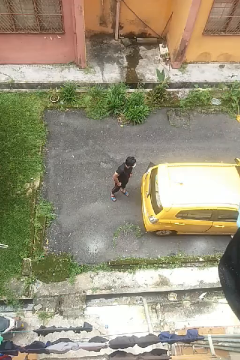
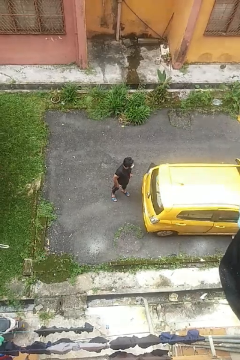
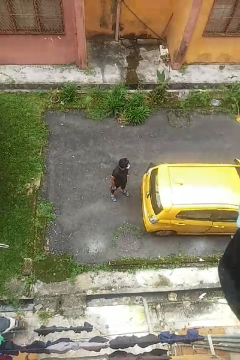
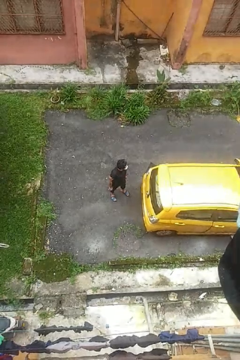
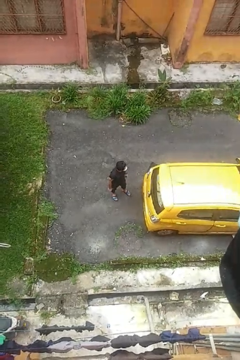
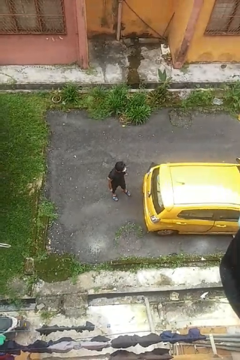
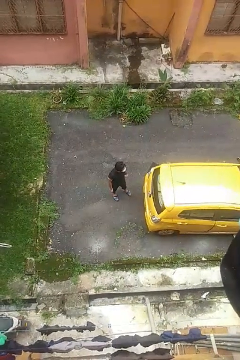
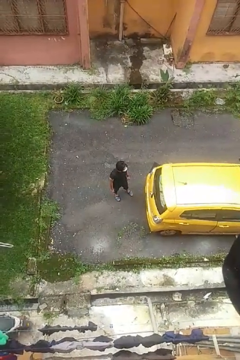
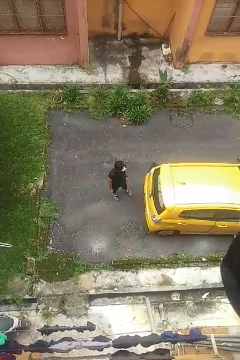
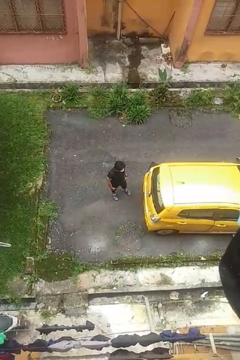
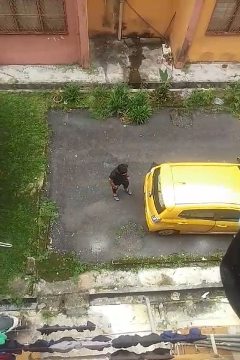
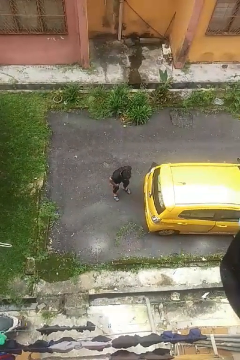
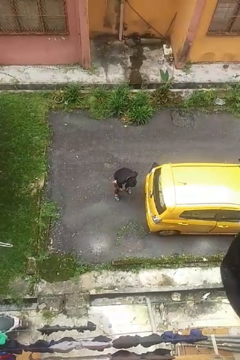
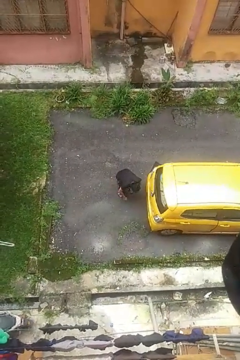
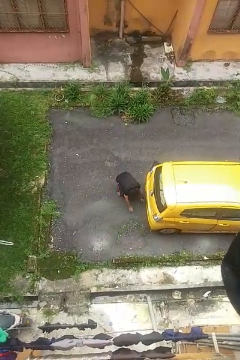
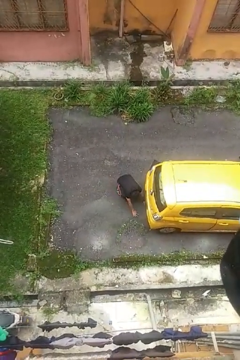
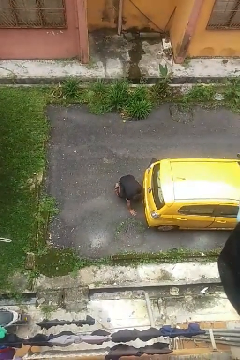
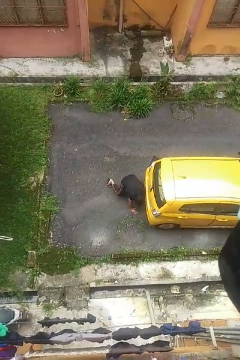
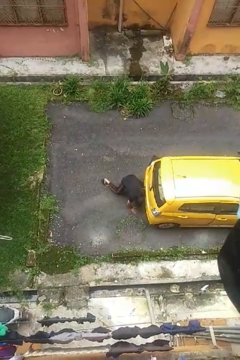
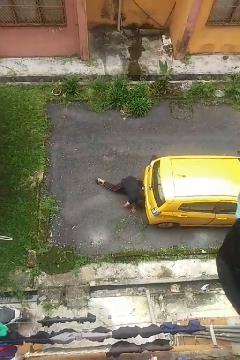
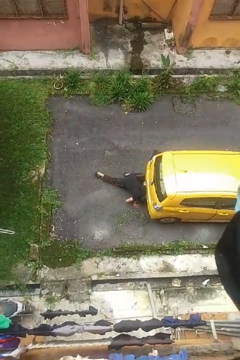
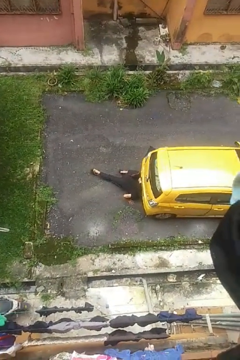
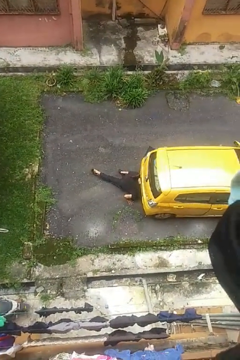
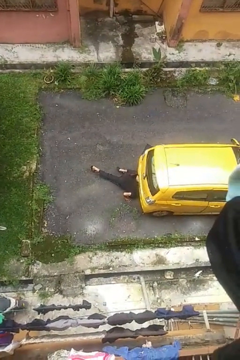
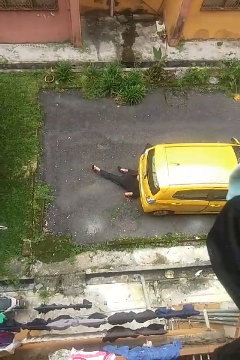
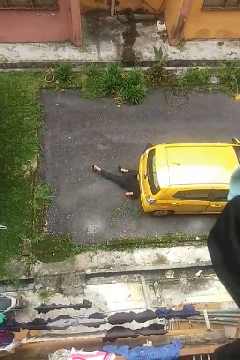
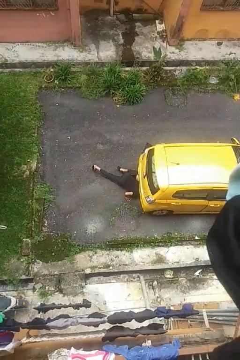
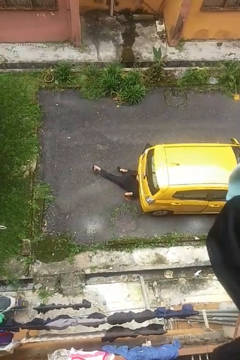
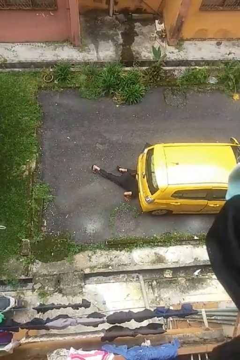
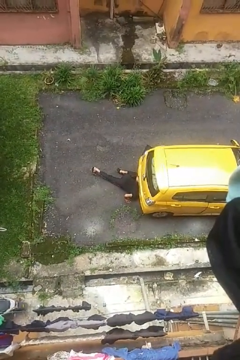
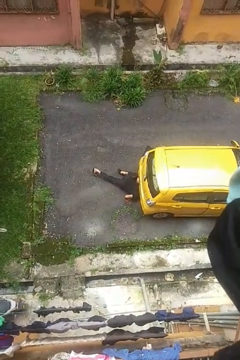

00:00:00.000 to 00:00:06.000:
person crawls out from under vehicle

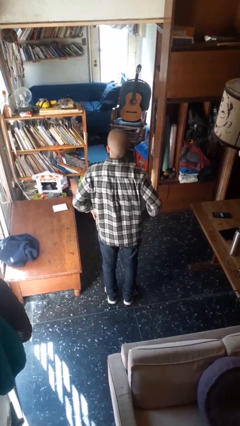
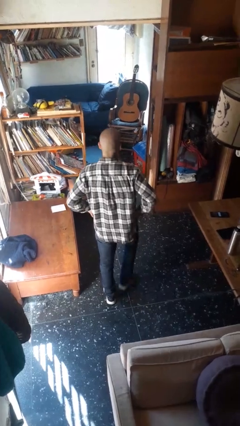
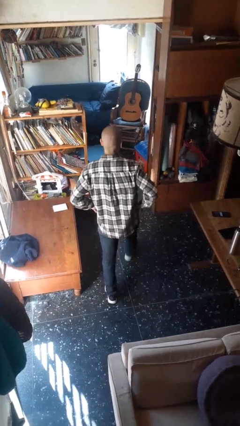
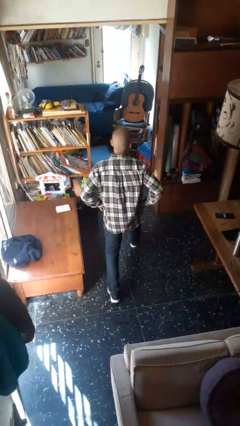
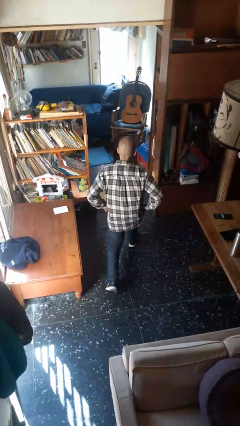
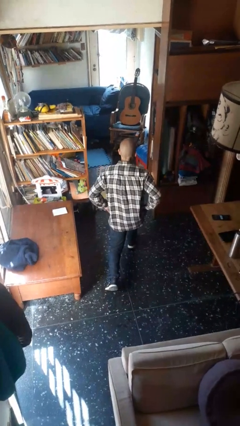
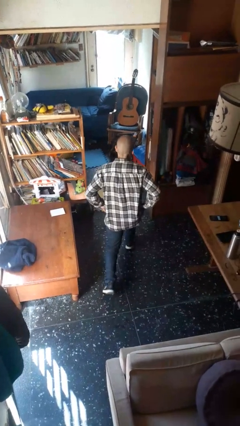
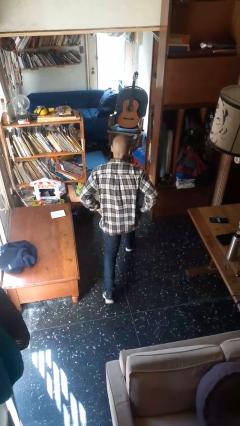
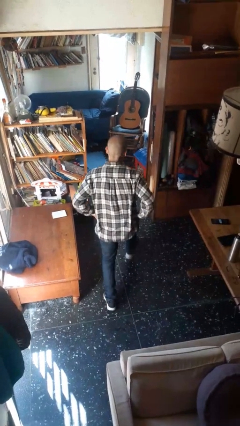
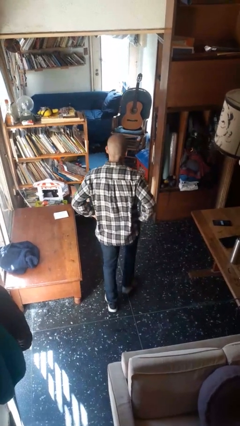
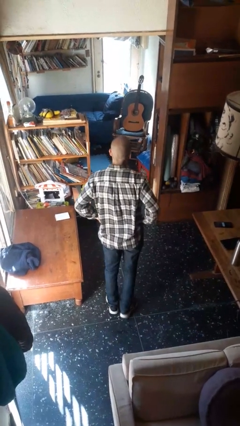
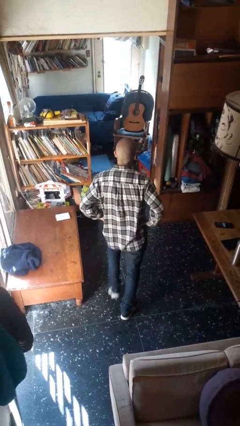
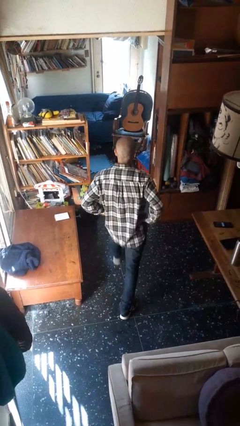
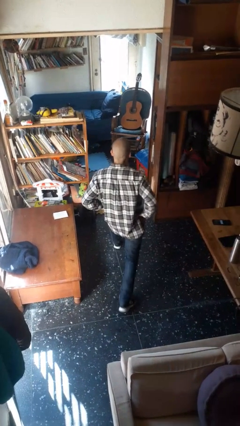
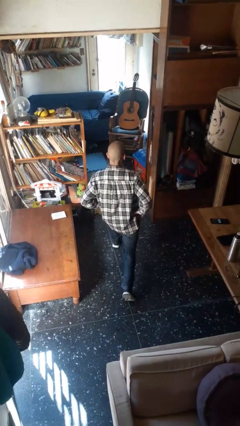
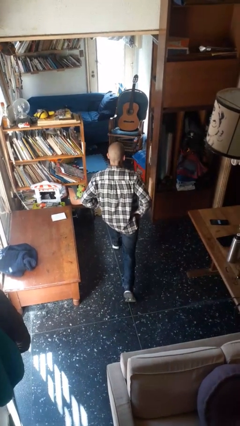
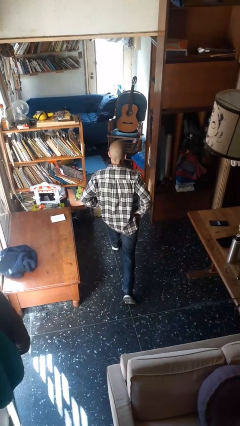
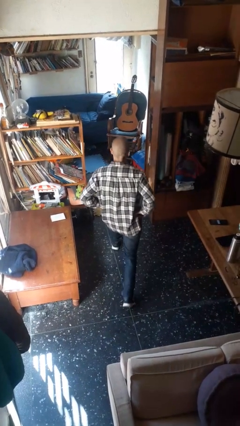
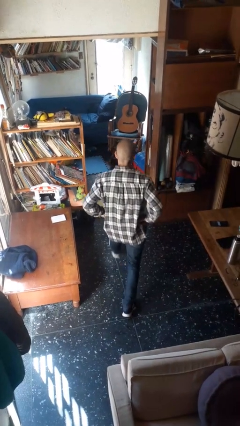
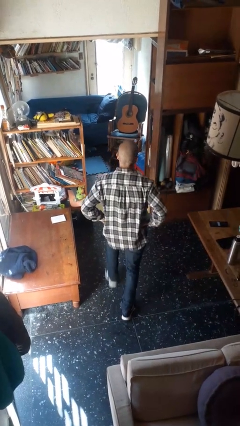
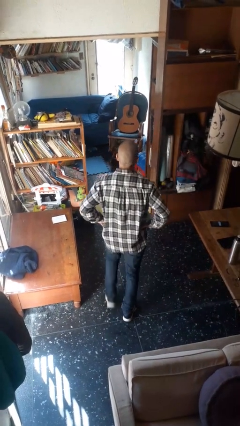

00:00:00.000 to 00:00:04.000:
person exercises with lunges

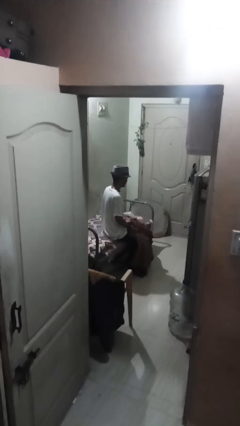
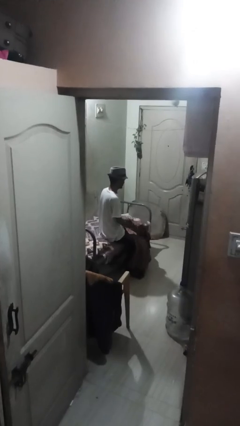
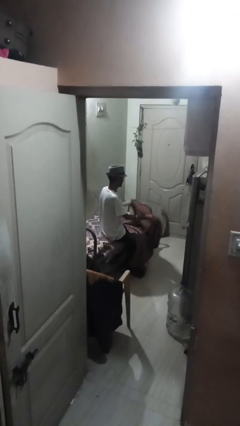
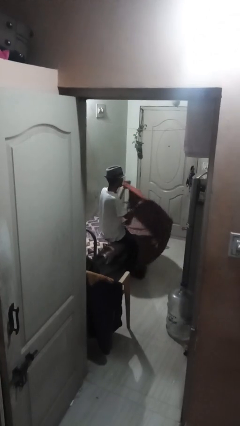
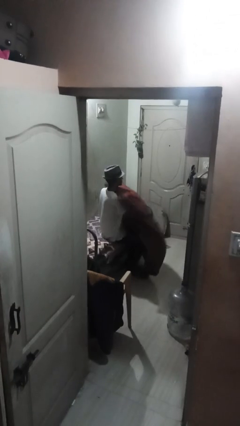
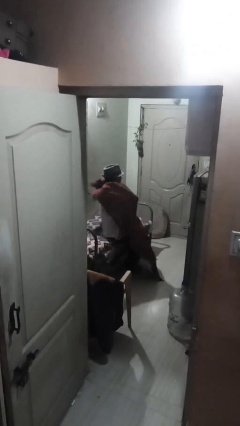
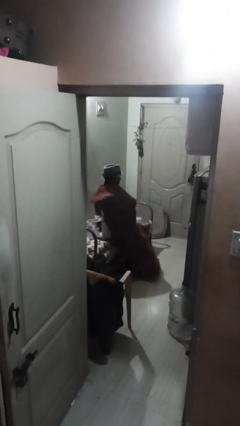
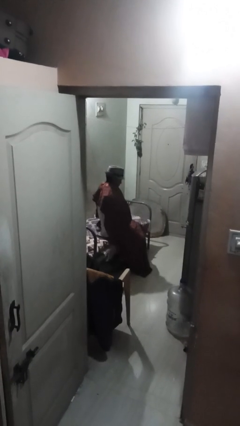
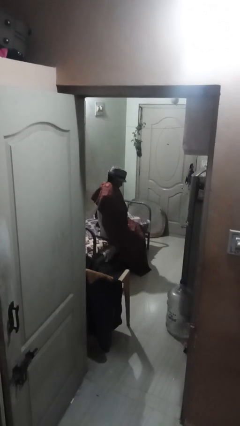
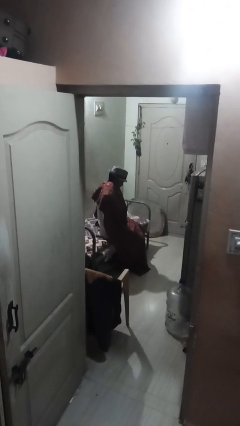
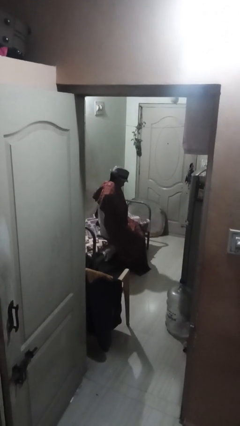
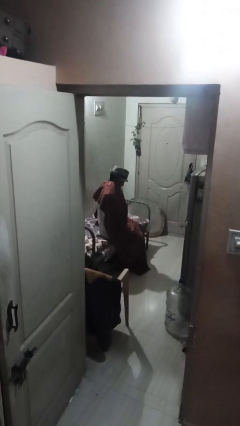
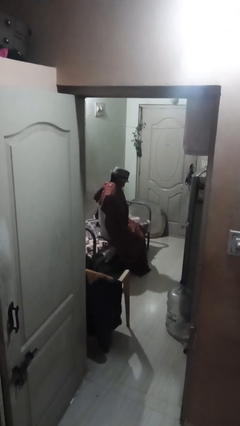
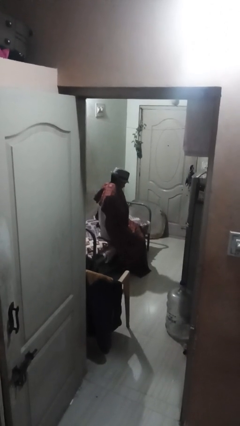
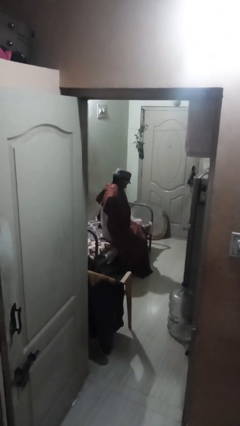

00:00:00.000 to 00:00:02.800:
person covers with blanket

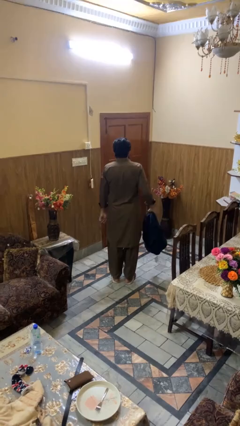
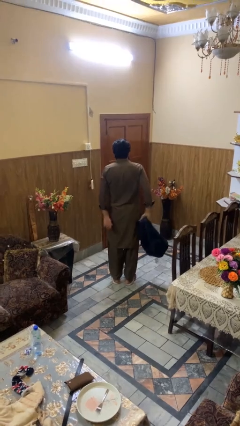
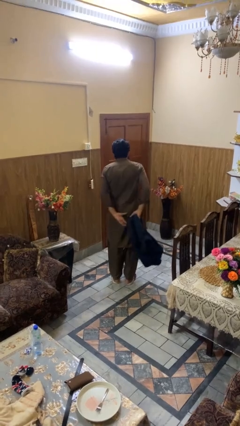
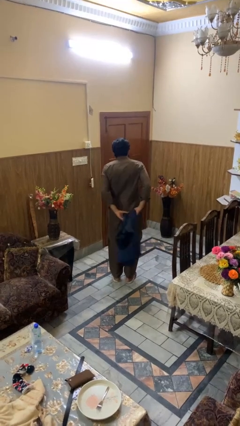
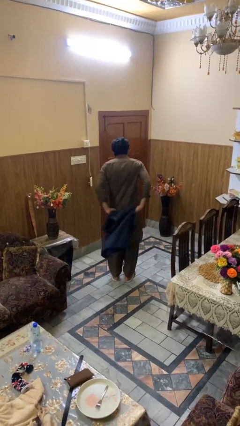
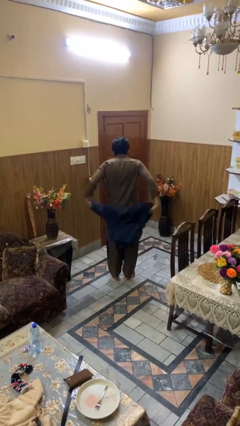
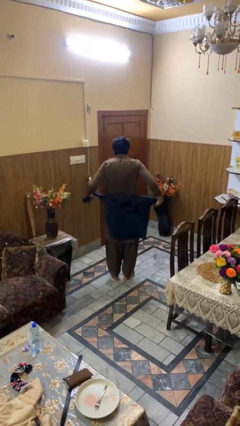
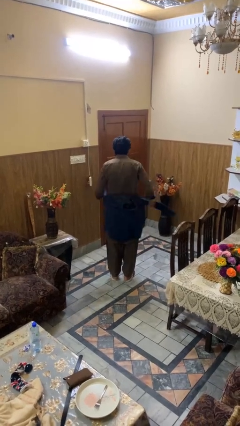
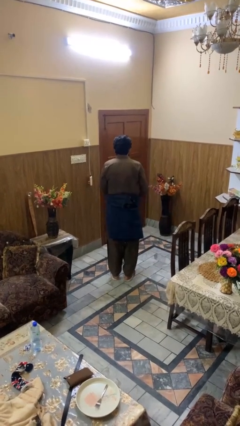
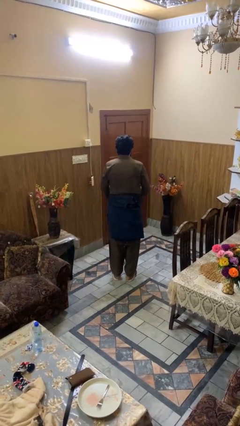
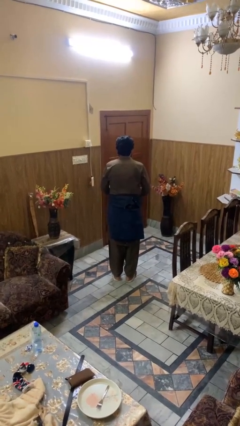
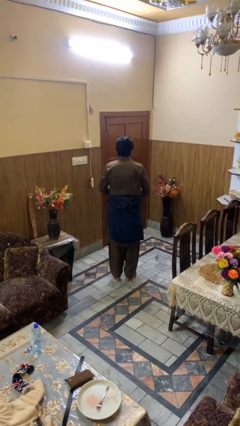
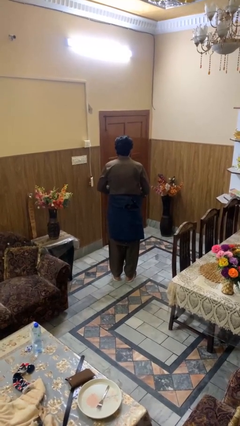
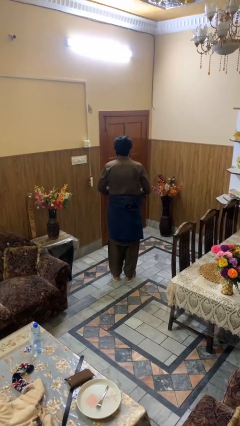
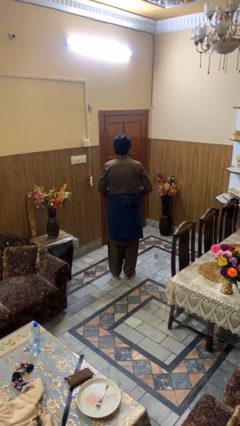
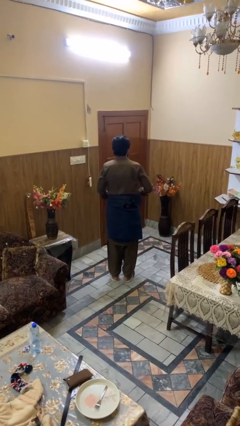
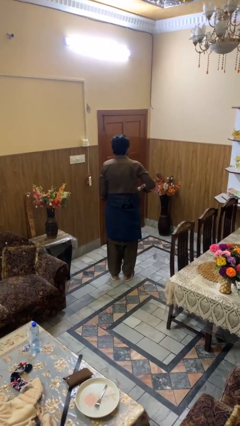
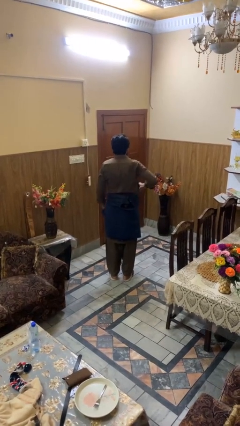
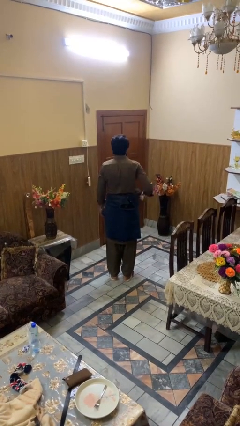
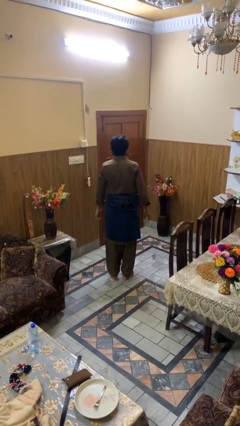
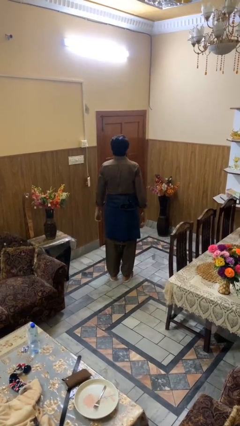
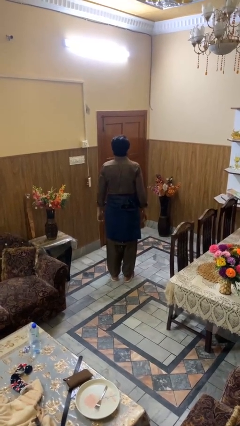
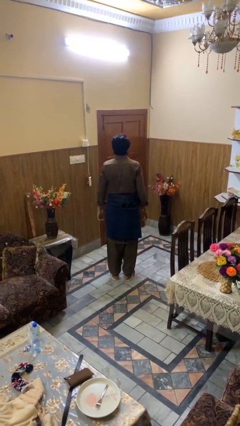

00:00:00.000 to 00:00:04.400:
person ties jacket around waist

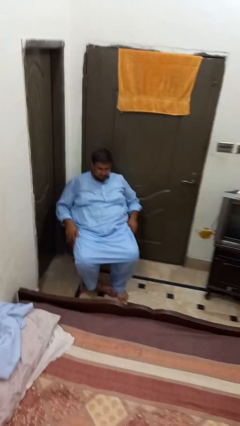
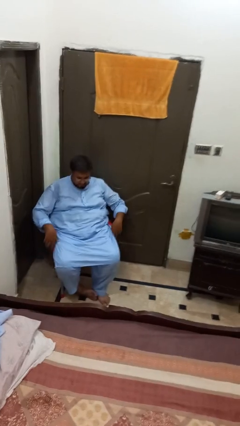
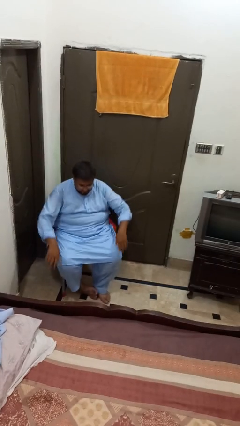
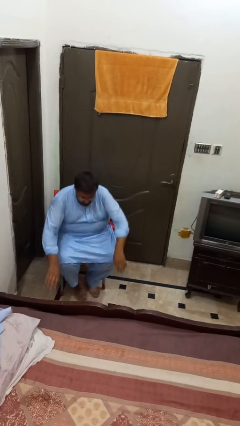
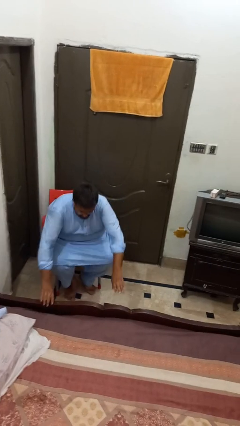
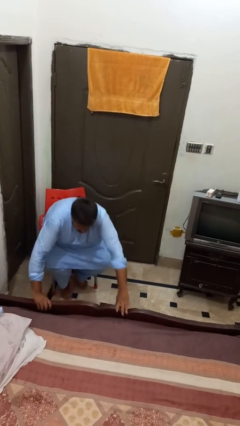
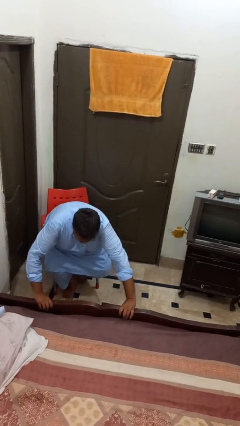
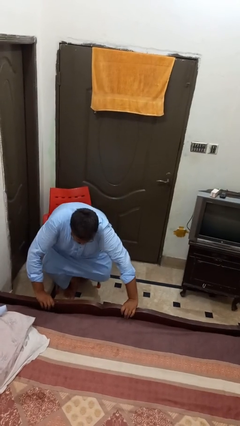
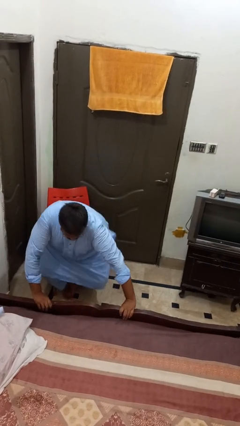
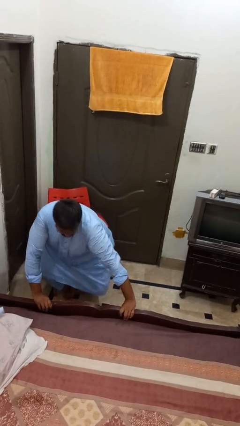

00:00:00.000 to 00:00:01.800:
person stands up from floor
